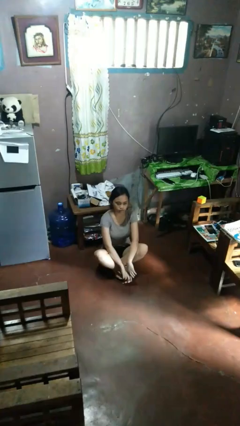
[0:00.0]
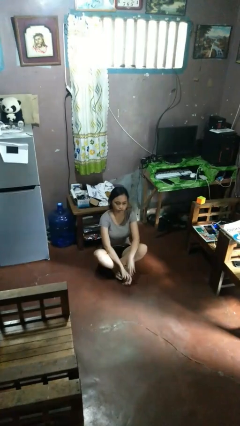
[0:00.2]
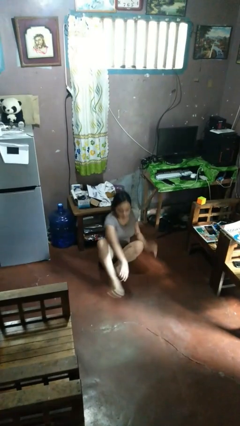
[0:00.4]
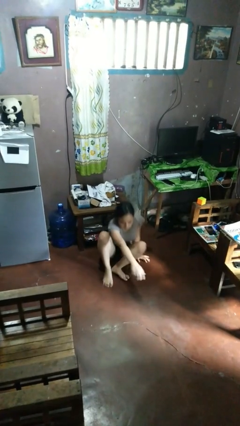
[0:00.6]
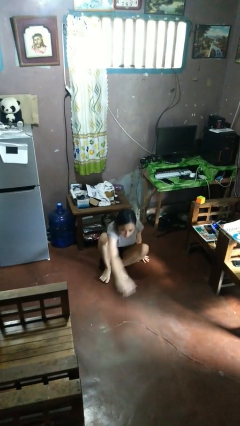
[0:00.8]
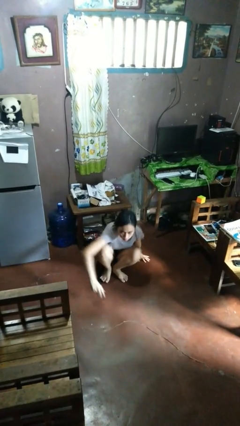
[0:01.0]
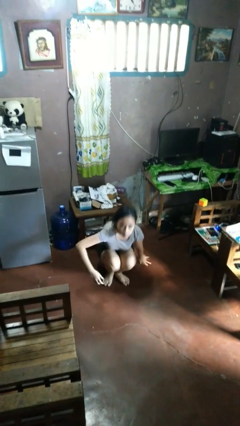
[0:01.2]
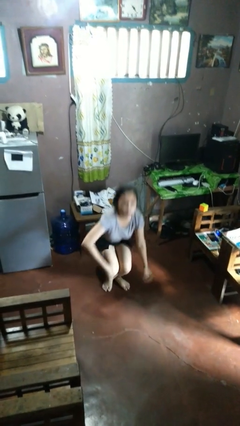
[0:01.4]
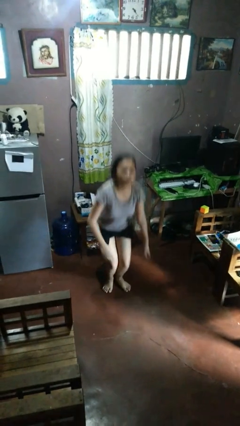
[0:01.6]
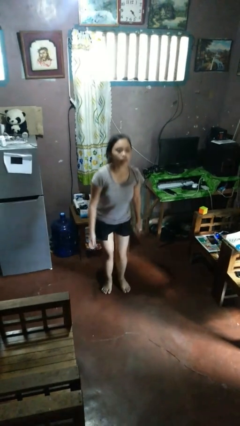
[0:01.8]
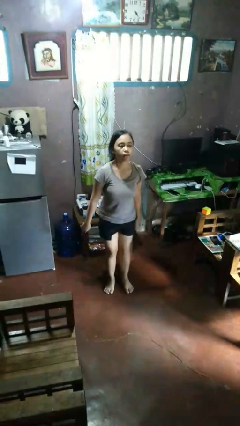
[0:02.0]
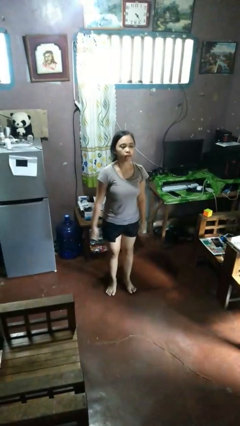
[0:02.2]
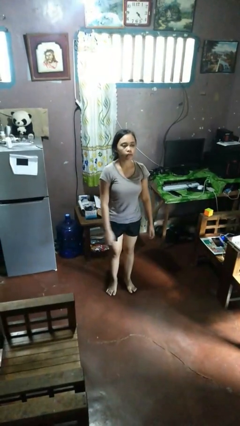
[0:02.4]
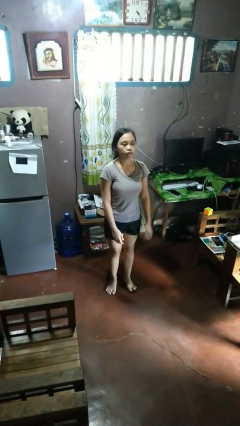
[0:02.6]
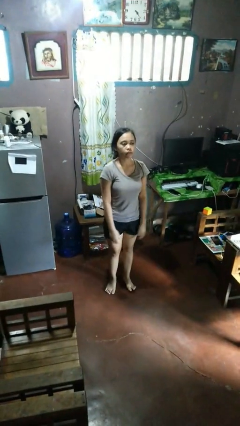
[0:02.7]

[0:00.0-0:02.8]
person stands up from floor

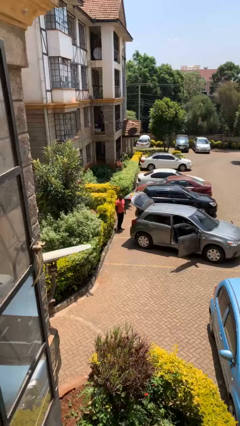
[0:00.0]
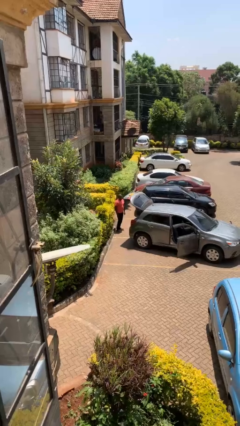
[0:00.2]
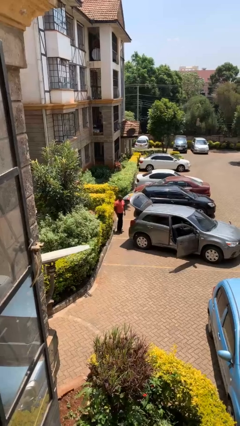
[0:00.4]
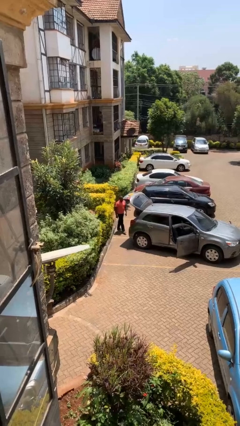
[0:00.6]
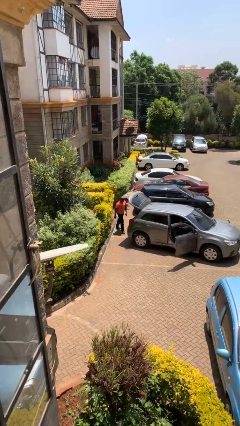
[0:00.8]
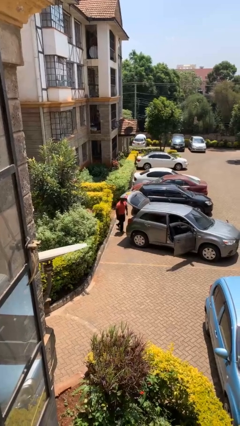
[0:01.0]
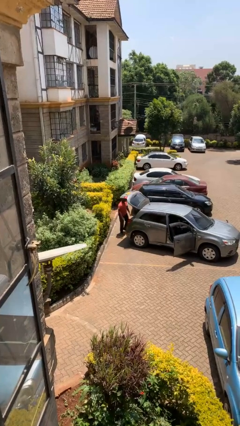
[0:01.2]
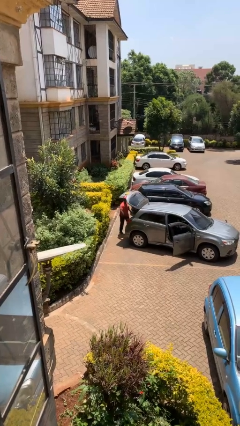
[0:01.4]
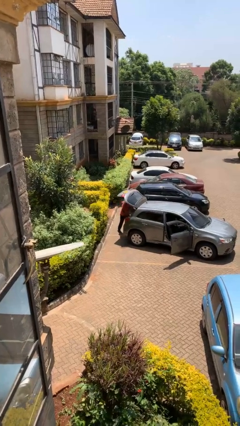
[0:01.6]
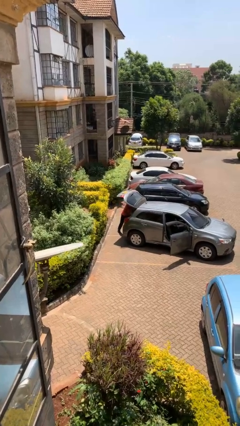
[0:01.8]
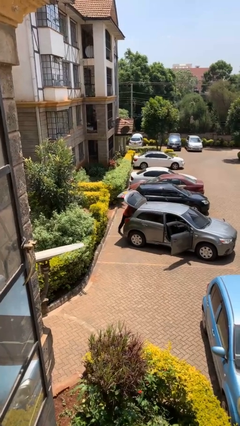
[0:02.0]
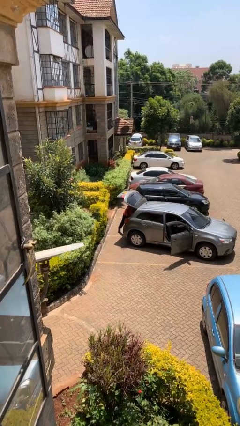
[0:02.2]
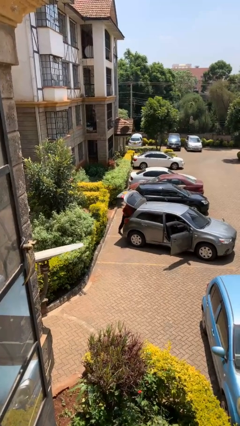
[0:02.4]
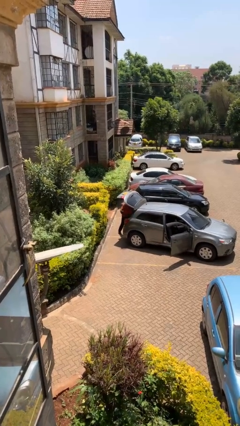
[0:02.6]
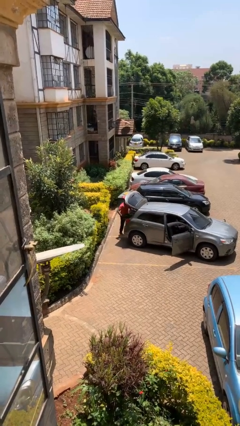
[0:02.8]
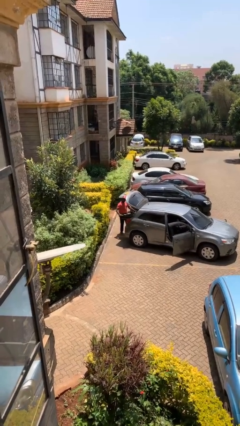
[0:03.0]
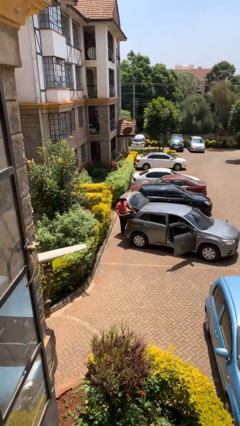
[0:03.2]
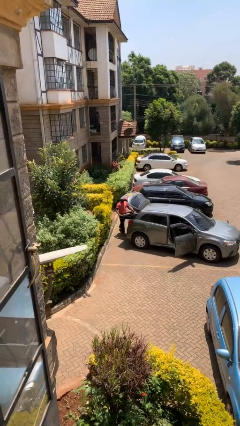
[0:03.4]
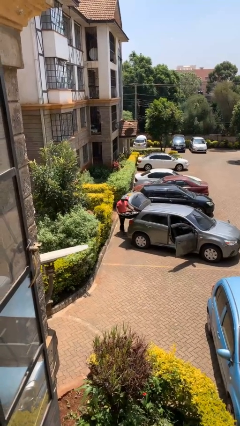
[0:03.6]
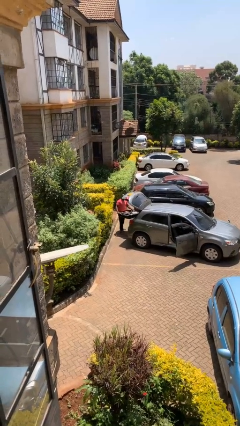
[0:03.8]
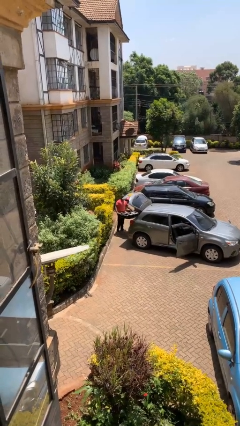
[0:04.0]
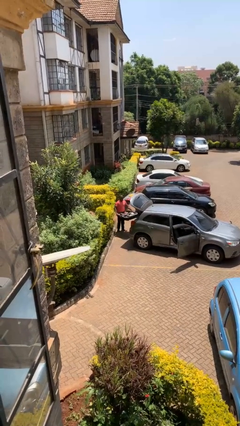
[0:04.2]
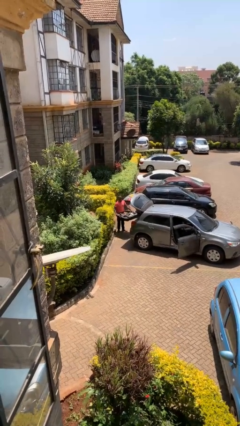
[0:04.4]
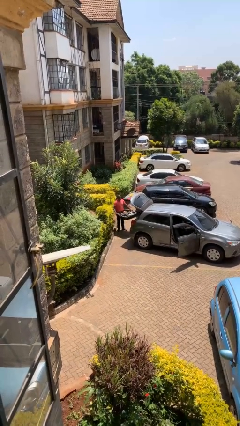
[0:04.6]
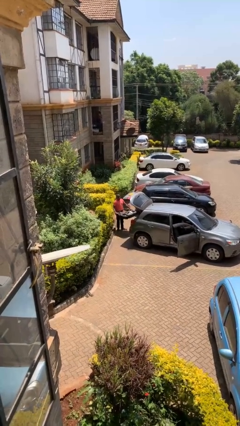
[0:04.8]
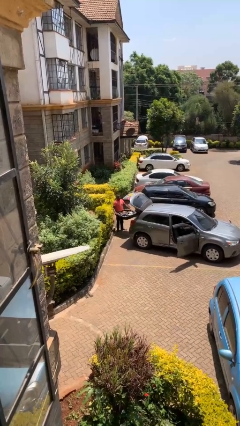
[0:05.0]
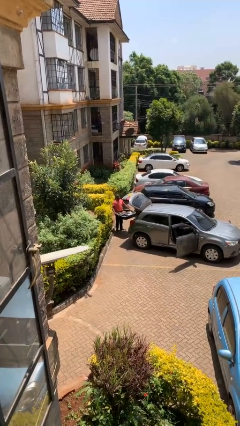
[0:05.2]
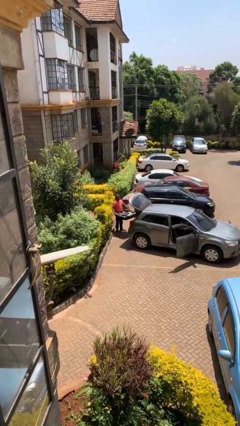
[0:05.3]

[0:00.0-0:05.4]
person unloads car

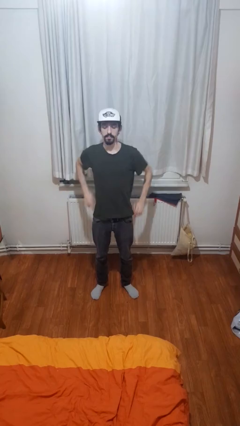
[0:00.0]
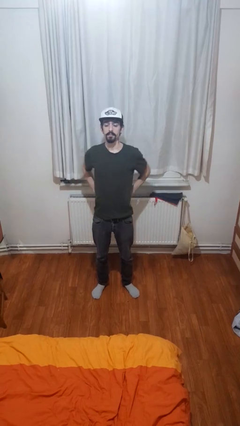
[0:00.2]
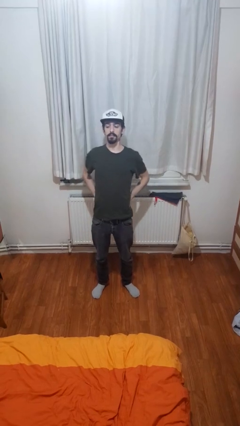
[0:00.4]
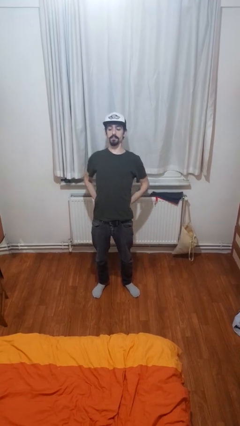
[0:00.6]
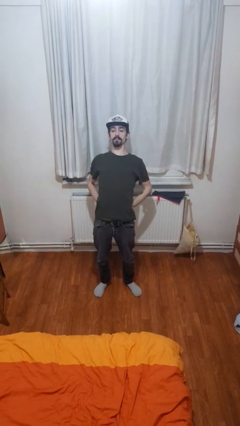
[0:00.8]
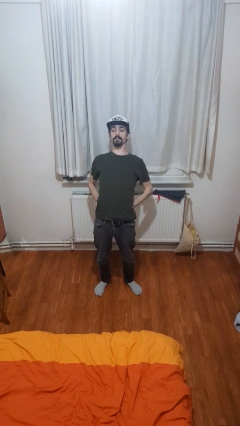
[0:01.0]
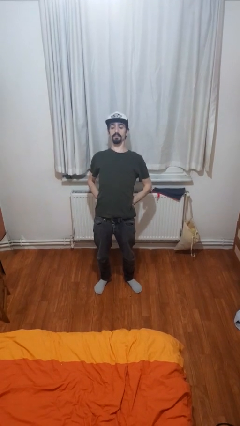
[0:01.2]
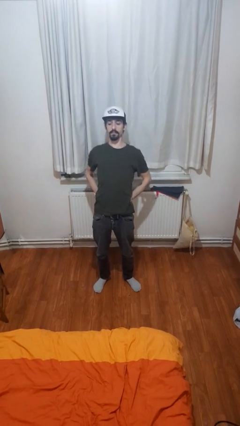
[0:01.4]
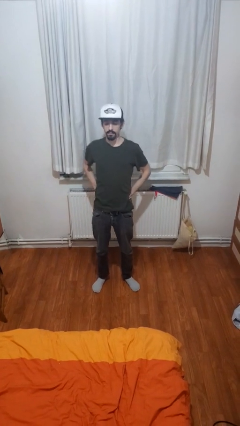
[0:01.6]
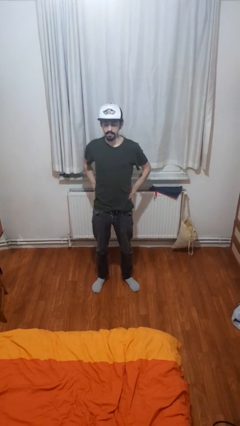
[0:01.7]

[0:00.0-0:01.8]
person stretches back

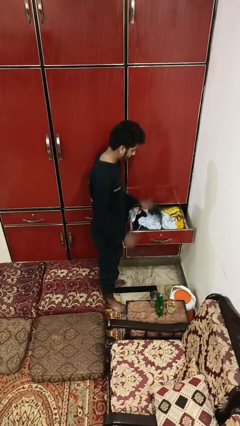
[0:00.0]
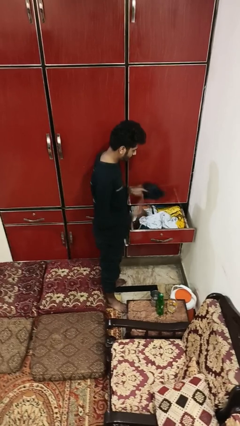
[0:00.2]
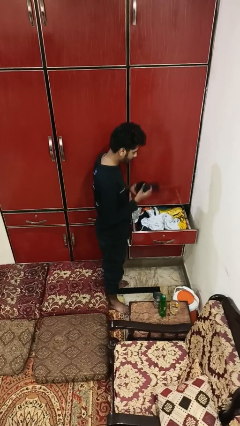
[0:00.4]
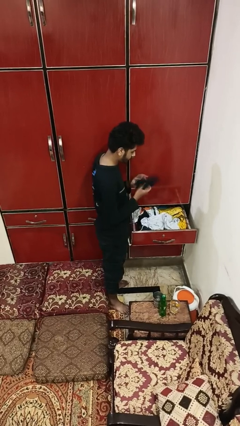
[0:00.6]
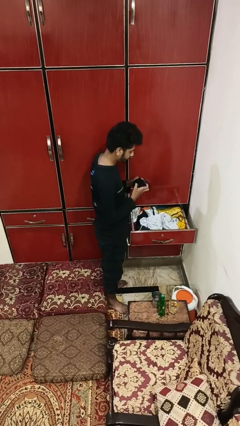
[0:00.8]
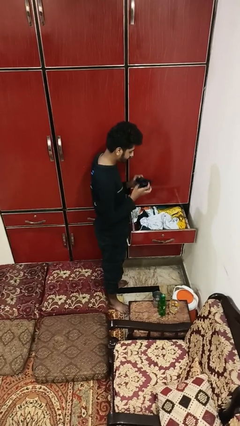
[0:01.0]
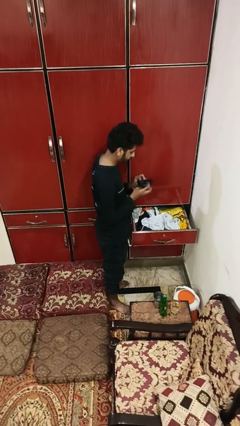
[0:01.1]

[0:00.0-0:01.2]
person takes clothes from dresser

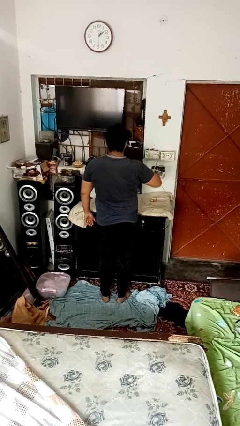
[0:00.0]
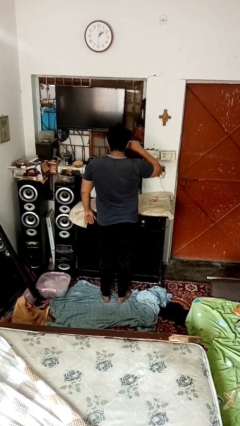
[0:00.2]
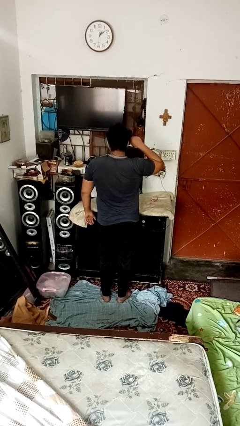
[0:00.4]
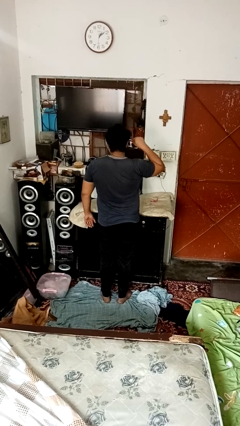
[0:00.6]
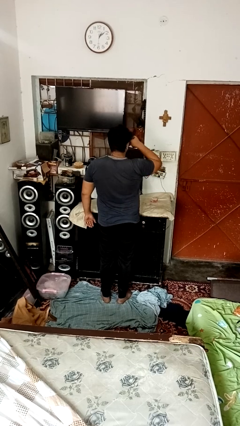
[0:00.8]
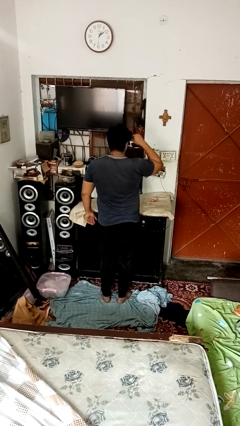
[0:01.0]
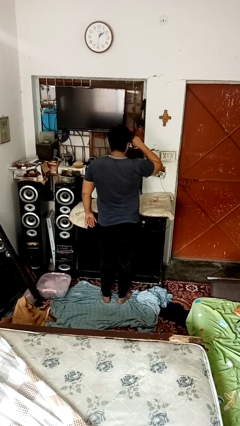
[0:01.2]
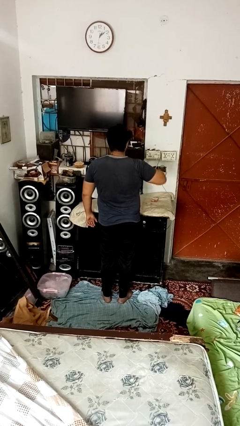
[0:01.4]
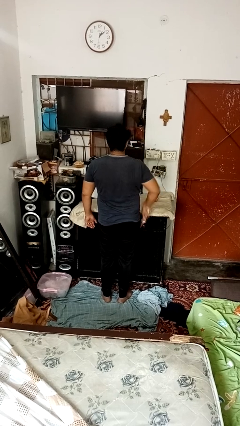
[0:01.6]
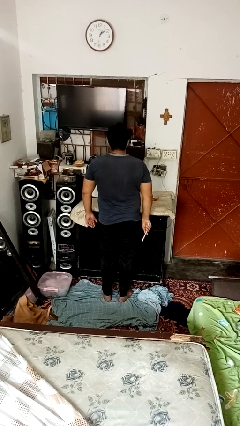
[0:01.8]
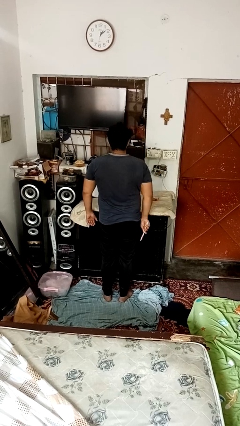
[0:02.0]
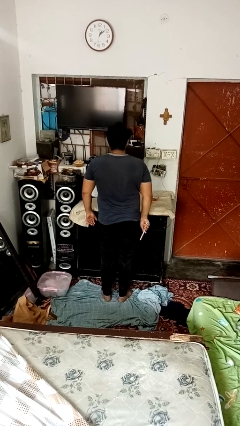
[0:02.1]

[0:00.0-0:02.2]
person applies eye makeup

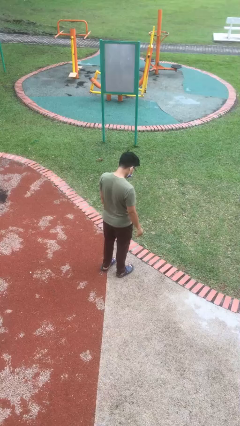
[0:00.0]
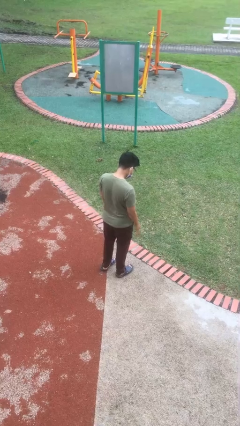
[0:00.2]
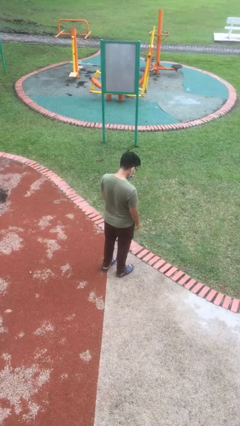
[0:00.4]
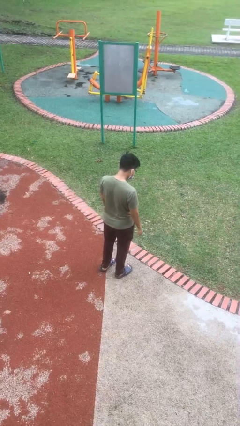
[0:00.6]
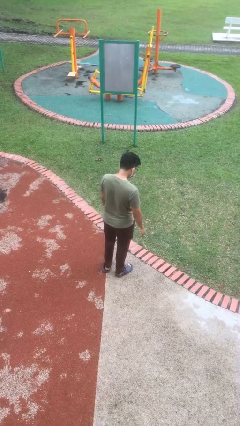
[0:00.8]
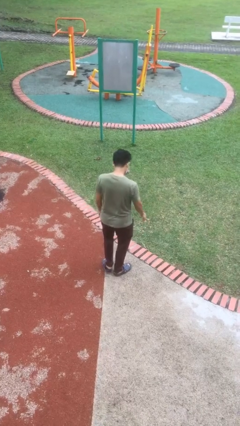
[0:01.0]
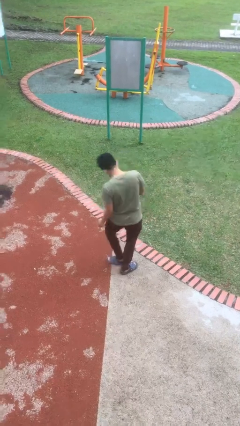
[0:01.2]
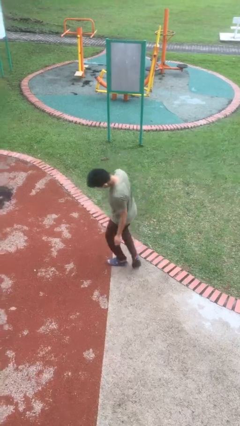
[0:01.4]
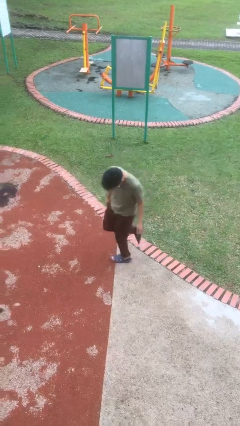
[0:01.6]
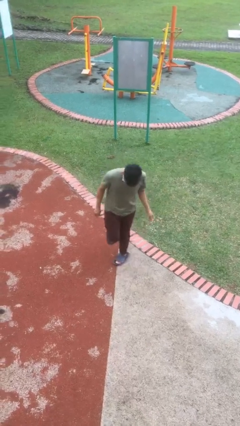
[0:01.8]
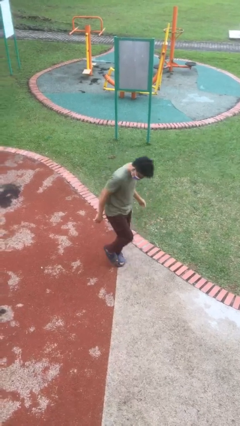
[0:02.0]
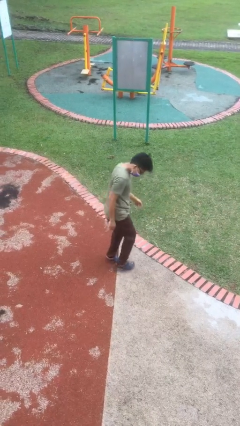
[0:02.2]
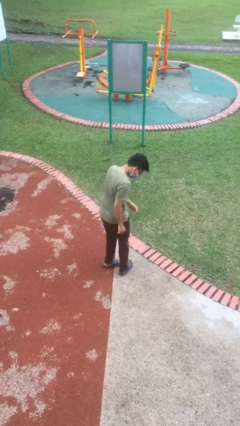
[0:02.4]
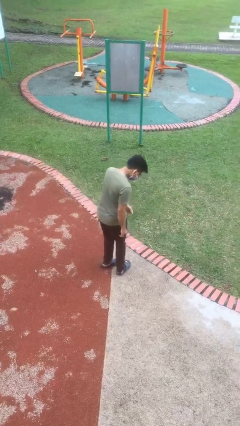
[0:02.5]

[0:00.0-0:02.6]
person twirls

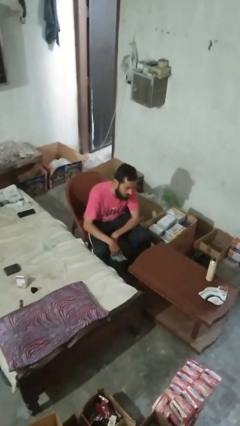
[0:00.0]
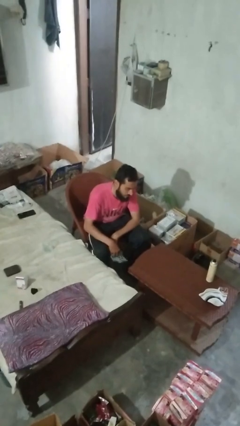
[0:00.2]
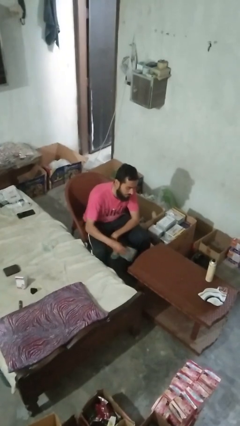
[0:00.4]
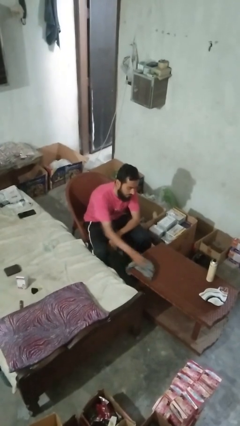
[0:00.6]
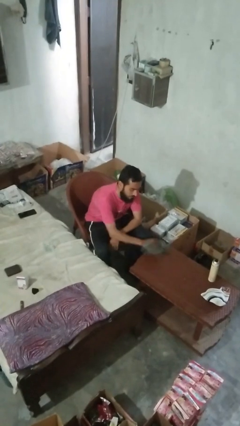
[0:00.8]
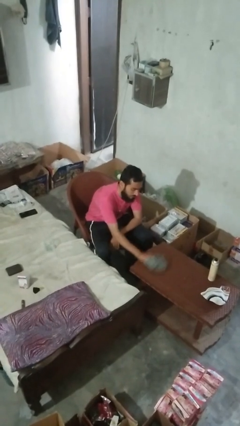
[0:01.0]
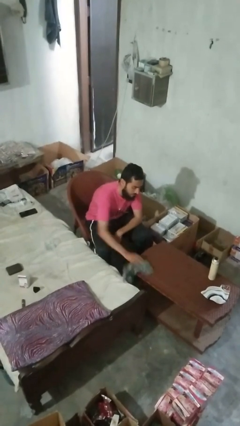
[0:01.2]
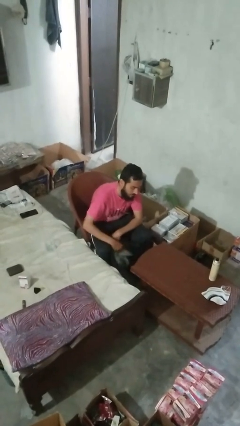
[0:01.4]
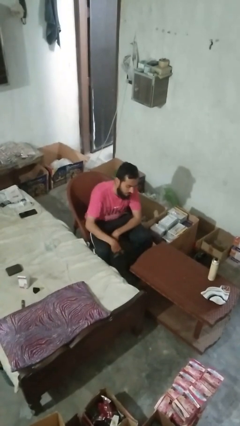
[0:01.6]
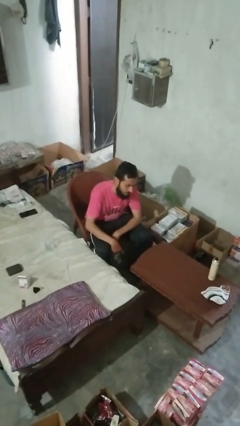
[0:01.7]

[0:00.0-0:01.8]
person cleans table with rag
